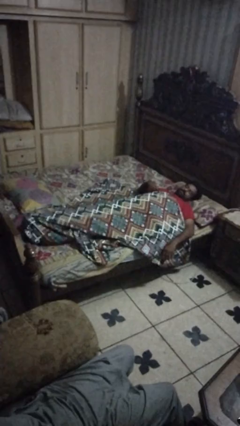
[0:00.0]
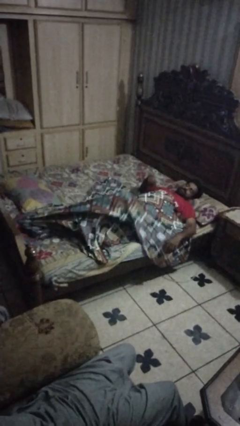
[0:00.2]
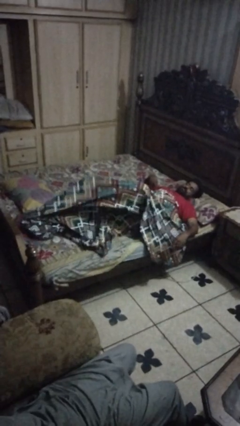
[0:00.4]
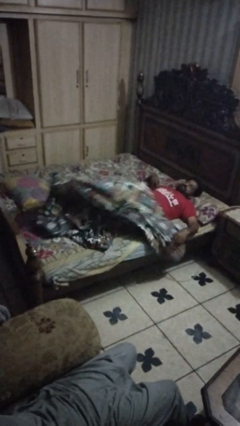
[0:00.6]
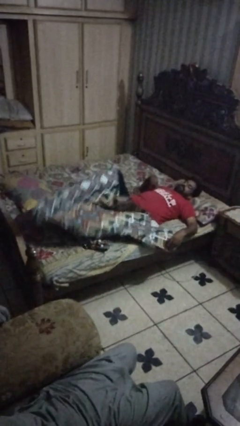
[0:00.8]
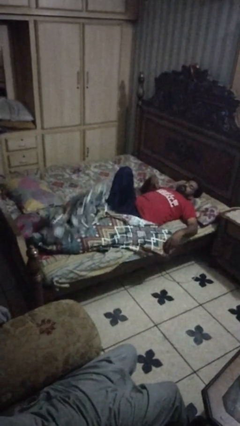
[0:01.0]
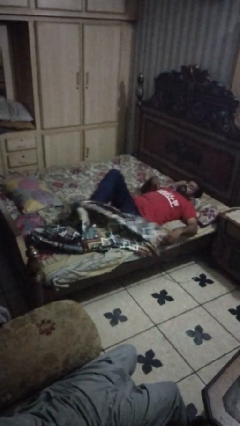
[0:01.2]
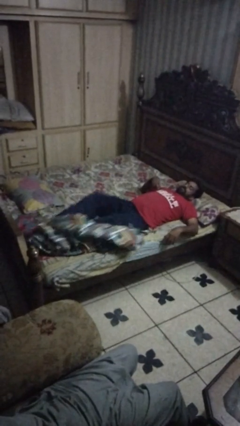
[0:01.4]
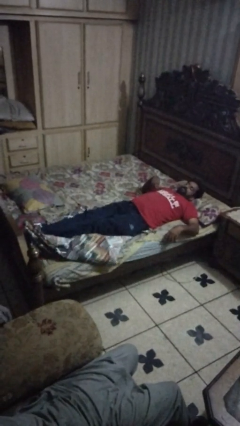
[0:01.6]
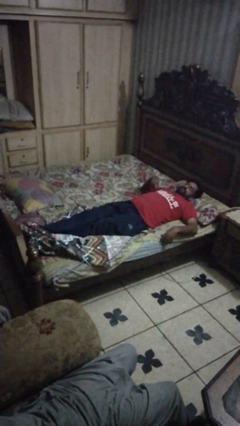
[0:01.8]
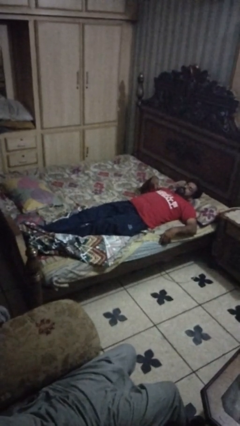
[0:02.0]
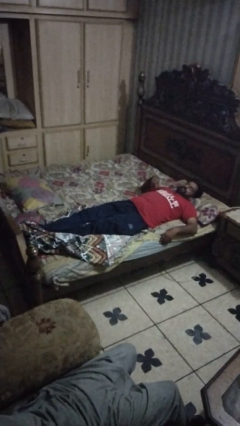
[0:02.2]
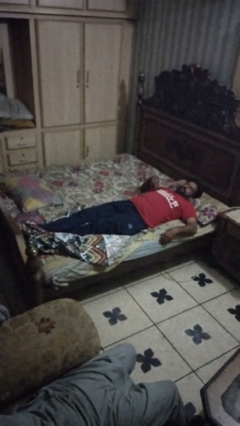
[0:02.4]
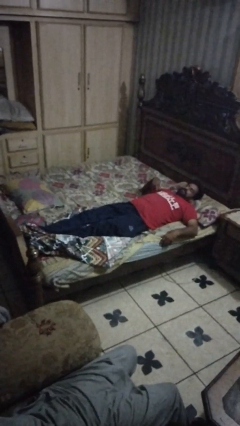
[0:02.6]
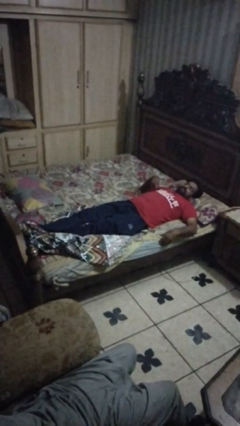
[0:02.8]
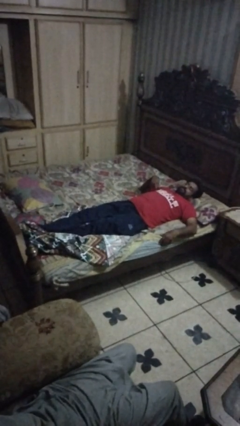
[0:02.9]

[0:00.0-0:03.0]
person uncovers with bedsheets

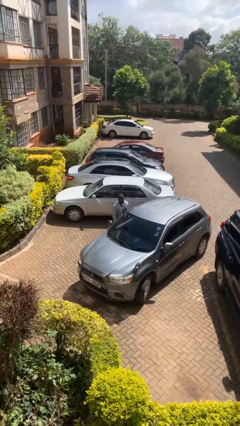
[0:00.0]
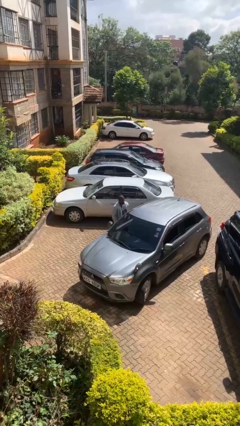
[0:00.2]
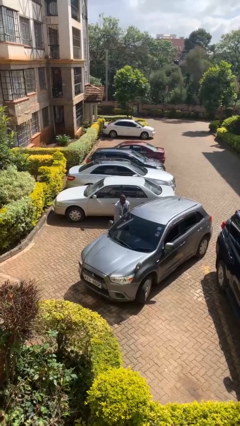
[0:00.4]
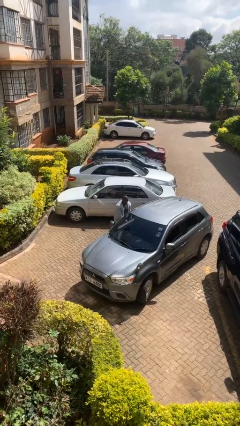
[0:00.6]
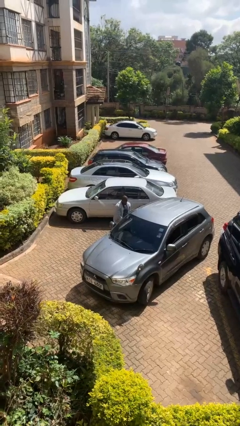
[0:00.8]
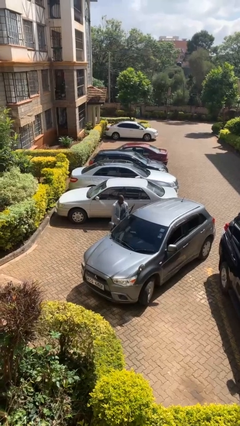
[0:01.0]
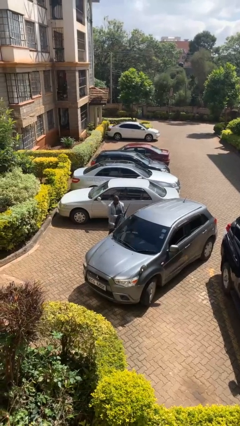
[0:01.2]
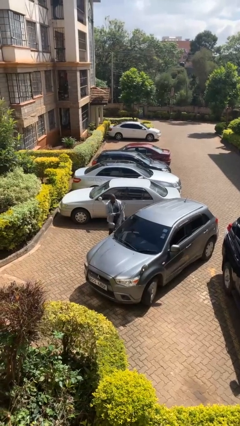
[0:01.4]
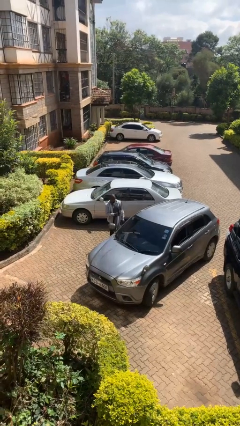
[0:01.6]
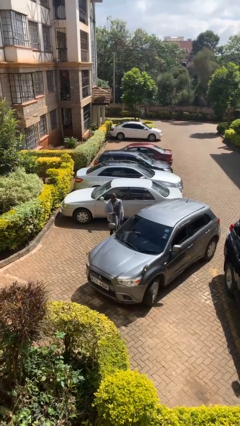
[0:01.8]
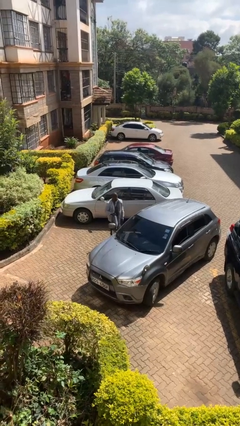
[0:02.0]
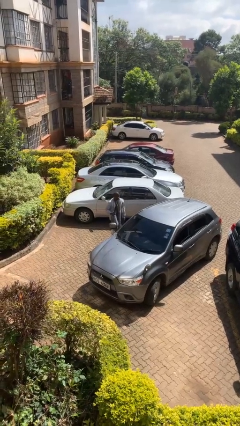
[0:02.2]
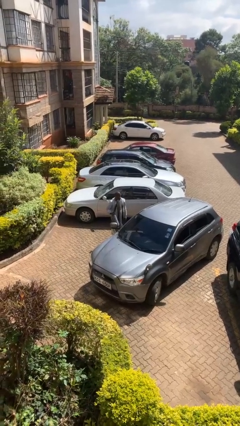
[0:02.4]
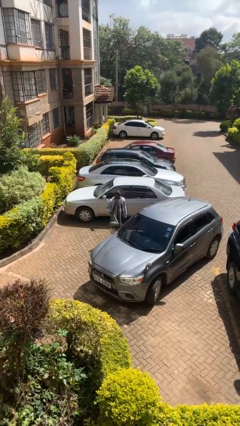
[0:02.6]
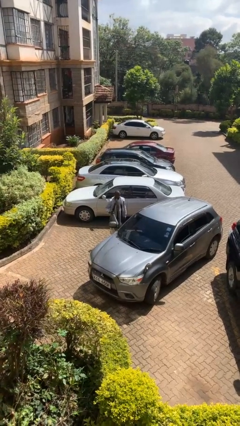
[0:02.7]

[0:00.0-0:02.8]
person opens car door

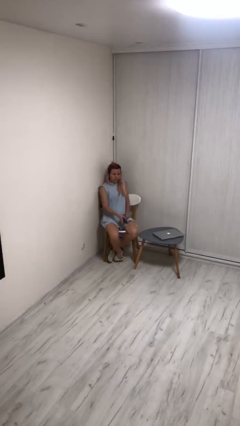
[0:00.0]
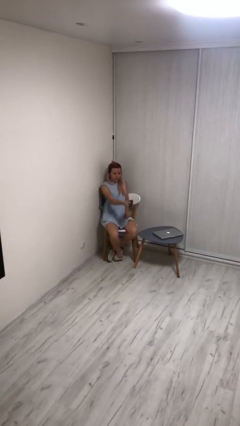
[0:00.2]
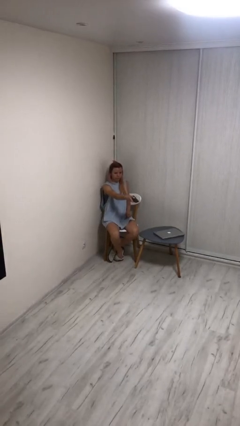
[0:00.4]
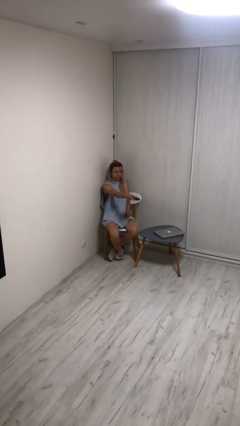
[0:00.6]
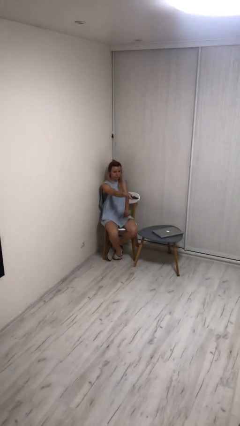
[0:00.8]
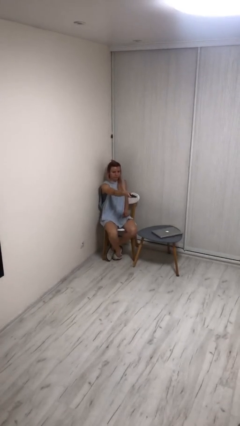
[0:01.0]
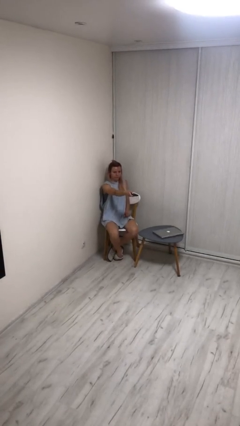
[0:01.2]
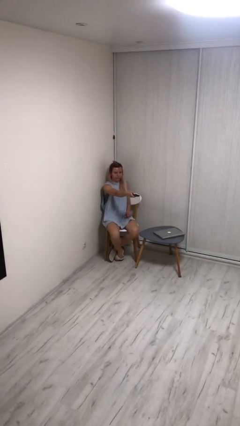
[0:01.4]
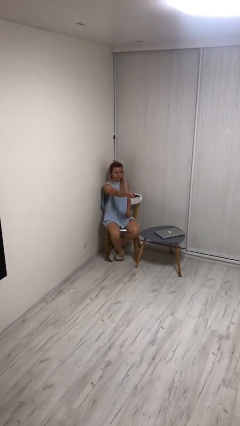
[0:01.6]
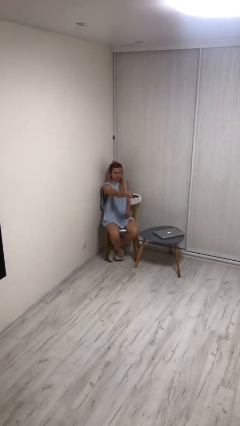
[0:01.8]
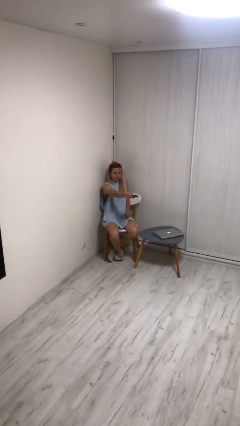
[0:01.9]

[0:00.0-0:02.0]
person uses television remote

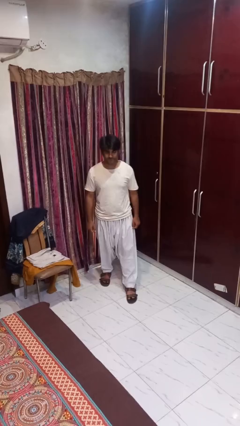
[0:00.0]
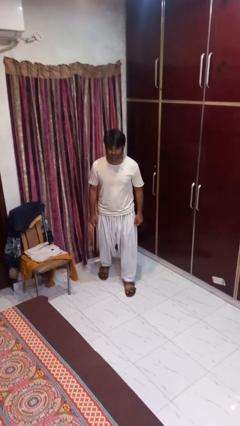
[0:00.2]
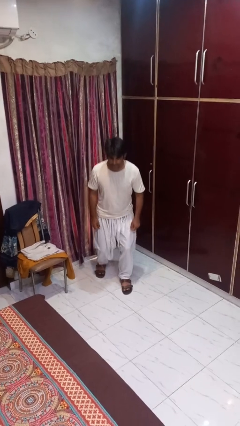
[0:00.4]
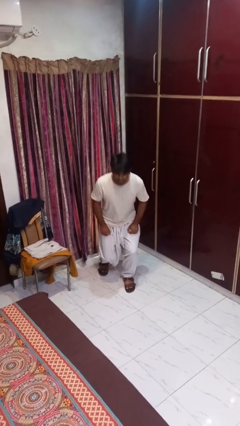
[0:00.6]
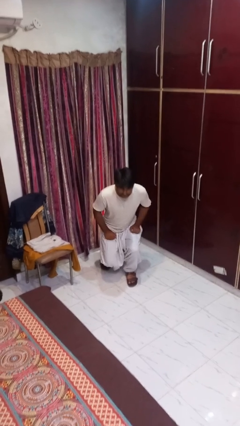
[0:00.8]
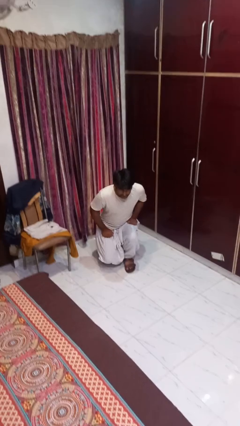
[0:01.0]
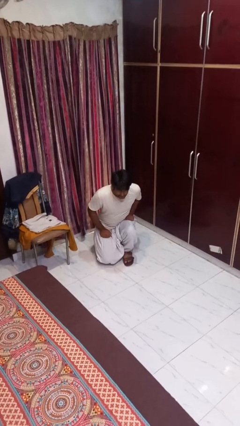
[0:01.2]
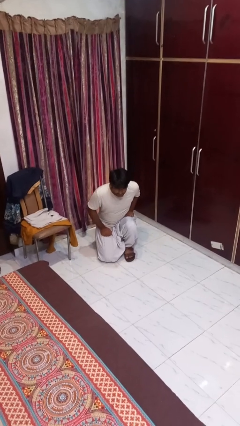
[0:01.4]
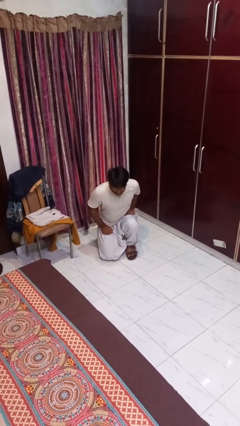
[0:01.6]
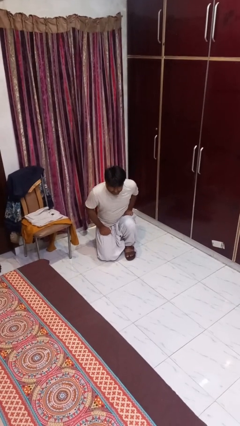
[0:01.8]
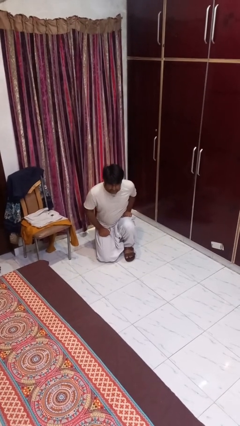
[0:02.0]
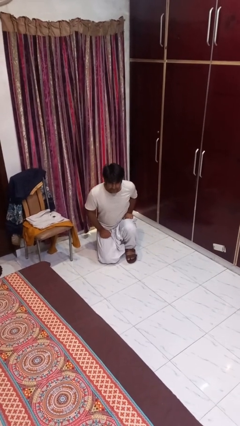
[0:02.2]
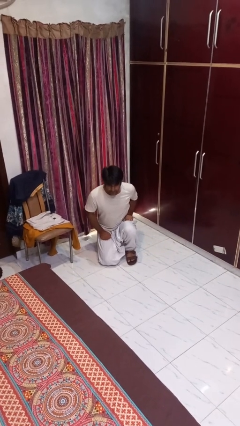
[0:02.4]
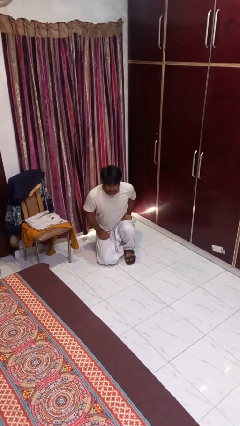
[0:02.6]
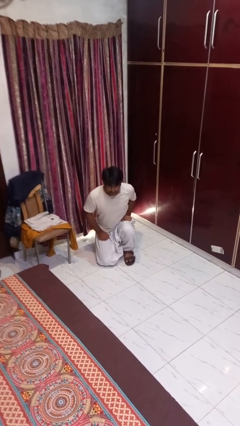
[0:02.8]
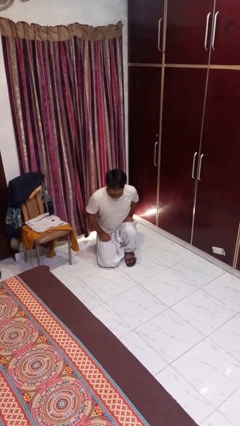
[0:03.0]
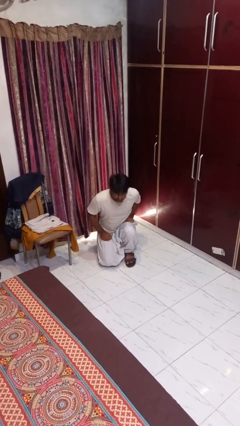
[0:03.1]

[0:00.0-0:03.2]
person kneels

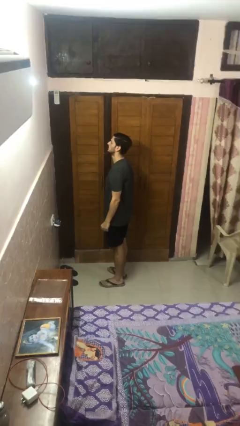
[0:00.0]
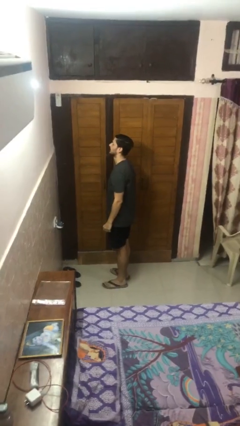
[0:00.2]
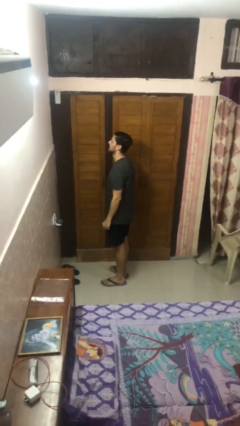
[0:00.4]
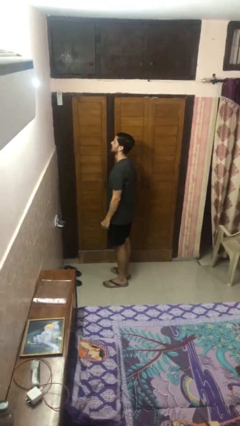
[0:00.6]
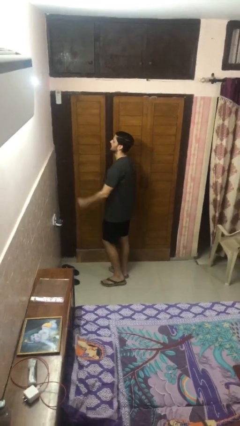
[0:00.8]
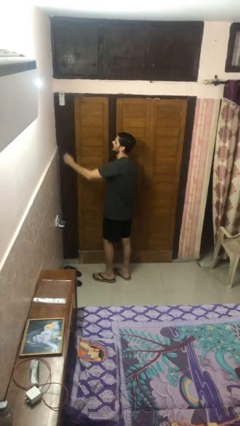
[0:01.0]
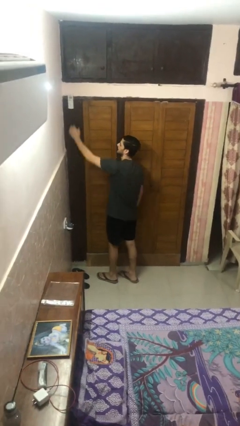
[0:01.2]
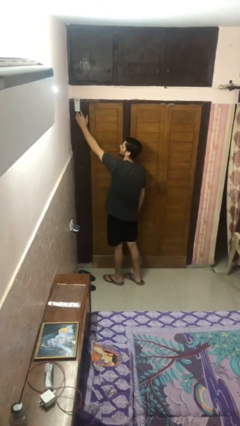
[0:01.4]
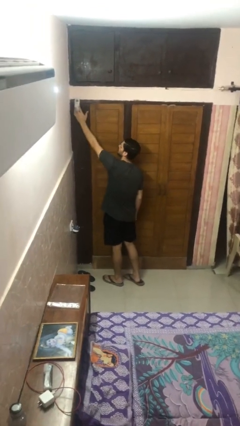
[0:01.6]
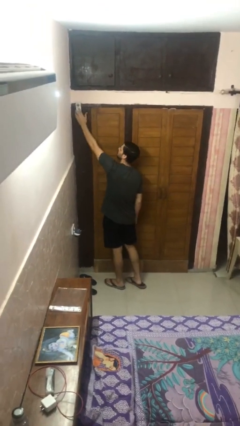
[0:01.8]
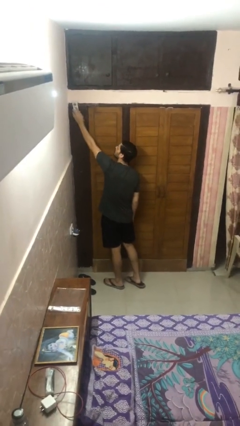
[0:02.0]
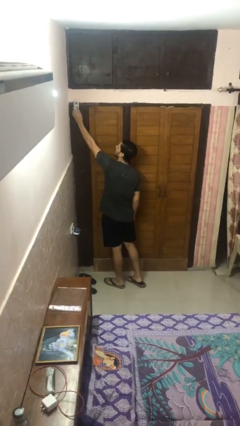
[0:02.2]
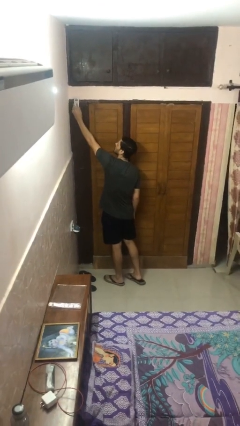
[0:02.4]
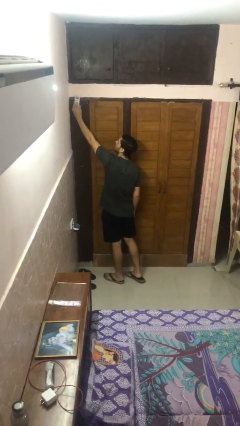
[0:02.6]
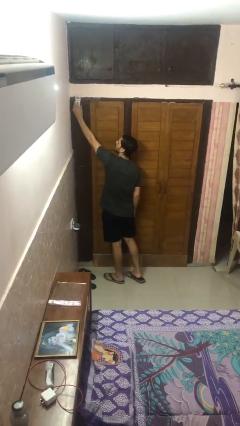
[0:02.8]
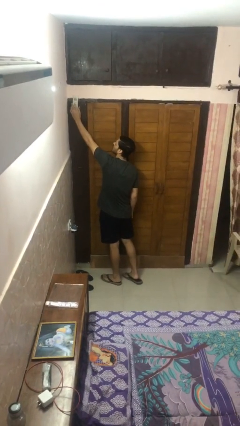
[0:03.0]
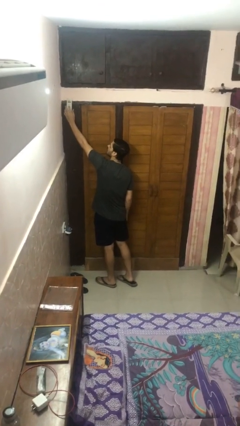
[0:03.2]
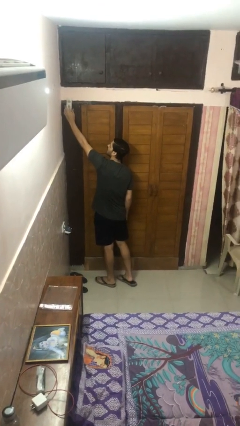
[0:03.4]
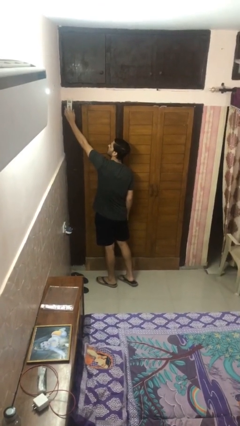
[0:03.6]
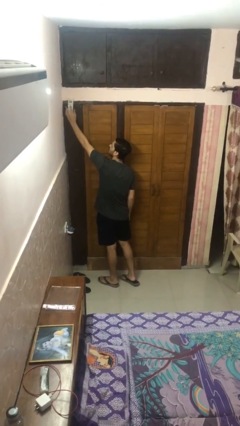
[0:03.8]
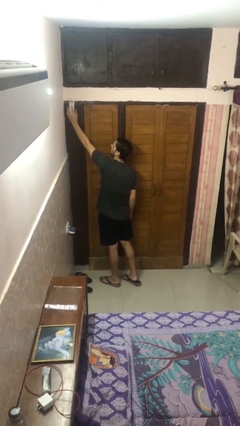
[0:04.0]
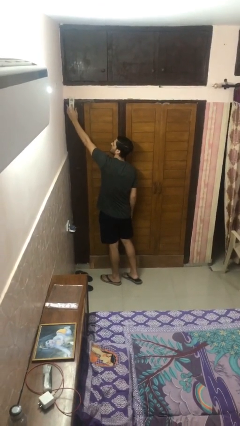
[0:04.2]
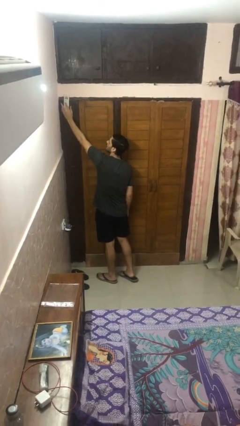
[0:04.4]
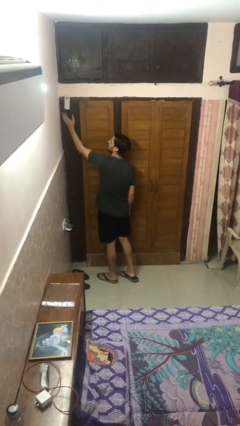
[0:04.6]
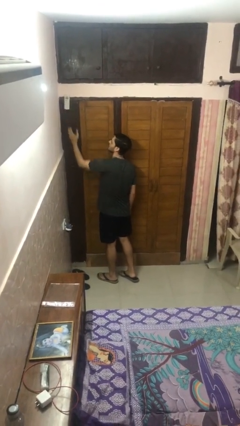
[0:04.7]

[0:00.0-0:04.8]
person adjusts thermostat

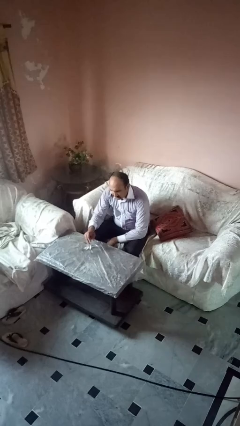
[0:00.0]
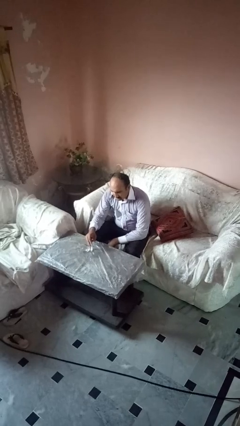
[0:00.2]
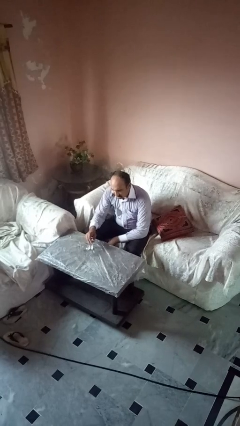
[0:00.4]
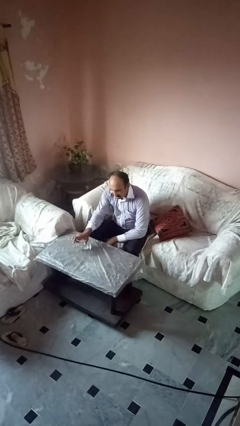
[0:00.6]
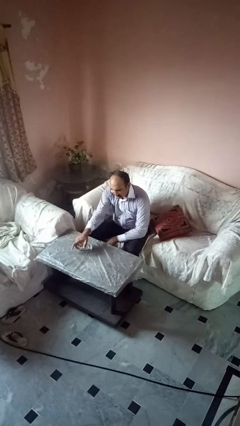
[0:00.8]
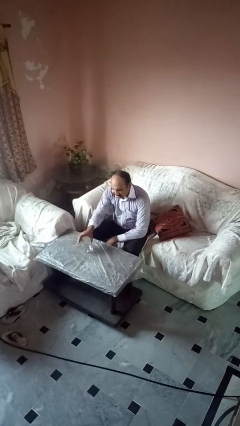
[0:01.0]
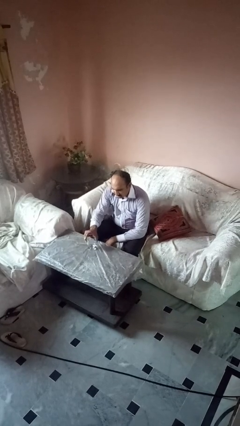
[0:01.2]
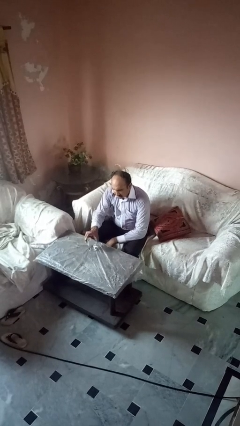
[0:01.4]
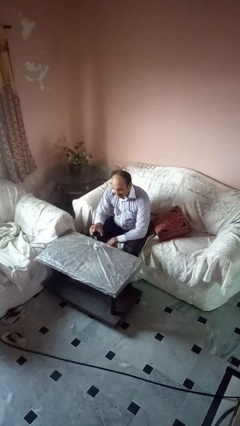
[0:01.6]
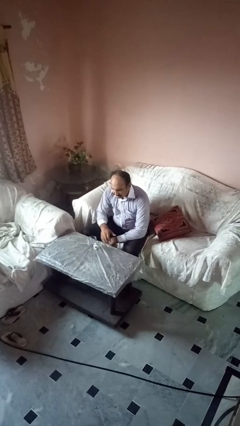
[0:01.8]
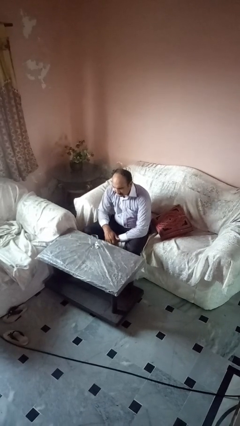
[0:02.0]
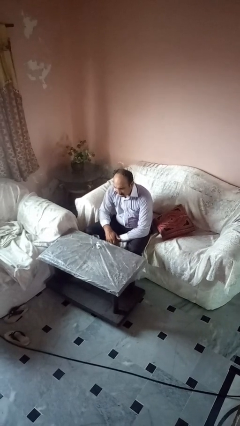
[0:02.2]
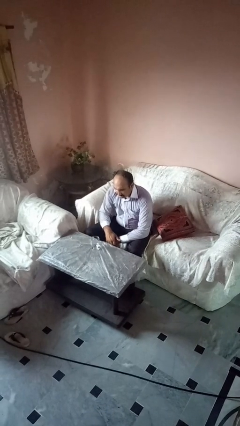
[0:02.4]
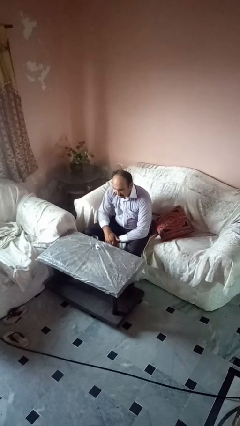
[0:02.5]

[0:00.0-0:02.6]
person sets upright glass
